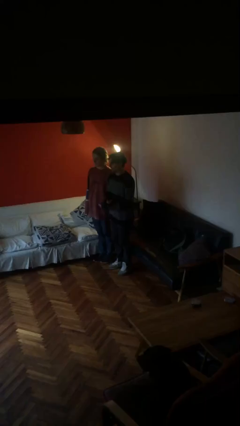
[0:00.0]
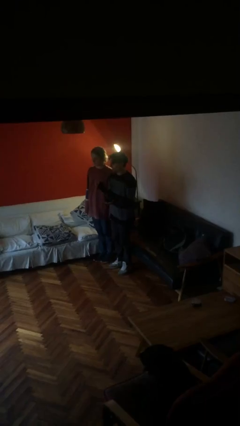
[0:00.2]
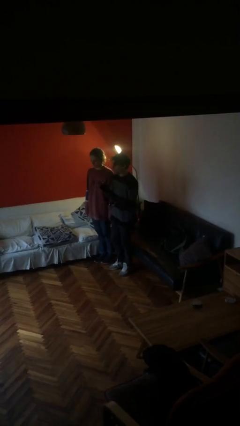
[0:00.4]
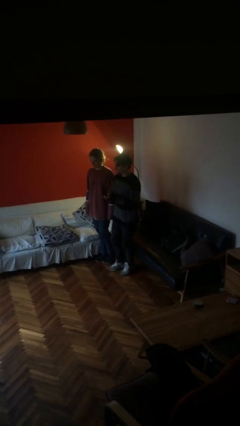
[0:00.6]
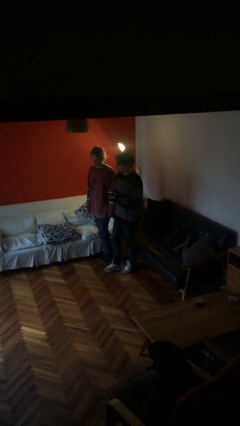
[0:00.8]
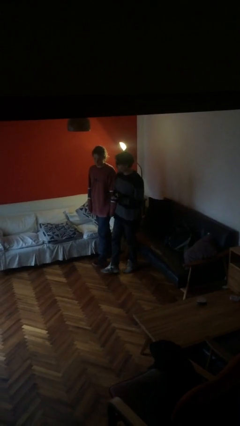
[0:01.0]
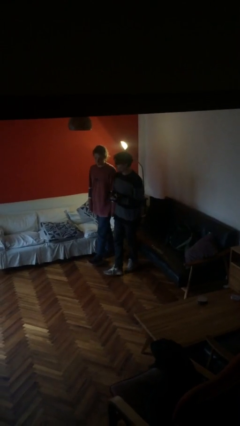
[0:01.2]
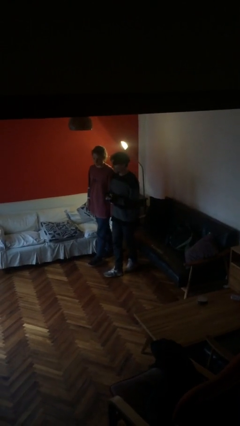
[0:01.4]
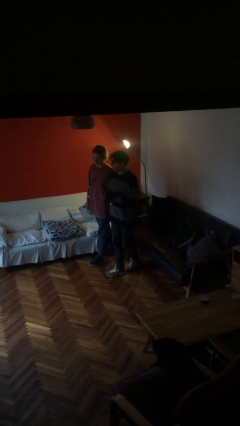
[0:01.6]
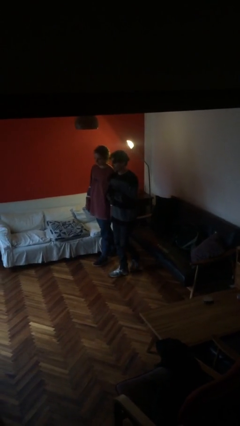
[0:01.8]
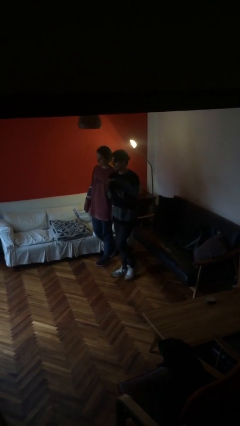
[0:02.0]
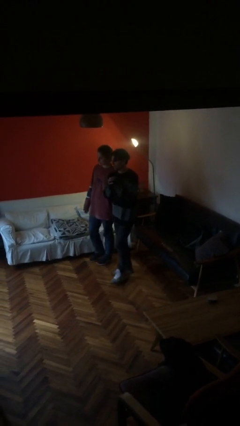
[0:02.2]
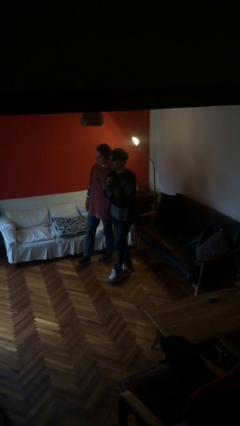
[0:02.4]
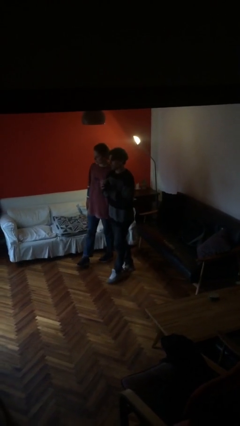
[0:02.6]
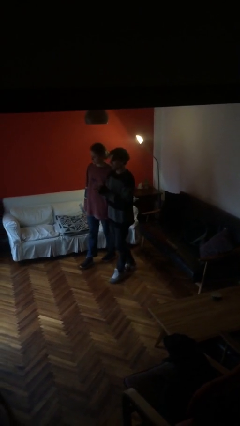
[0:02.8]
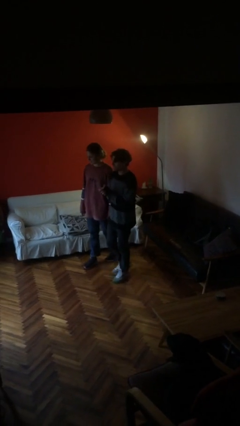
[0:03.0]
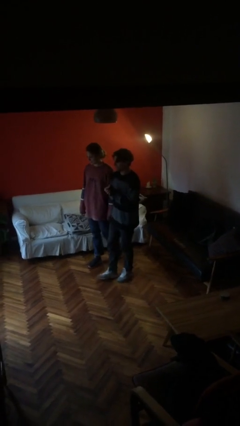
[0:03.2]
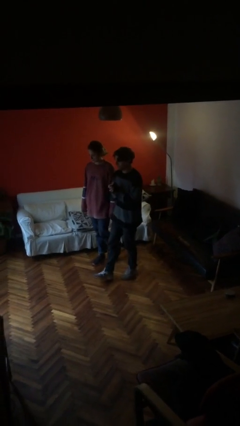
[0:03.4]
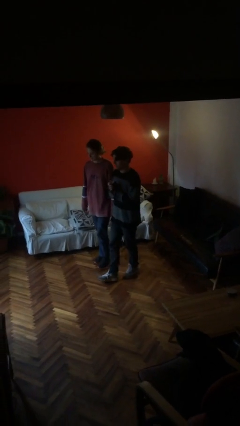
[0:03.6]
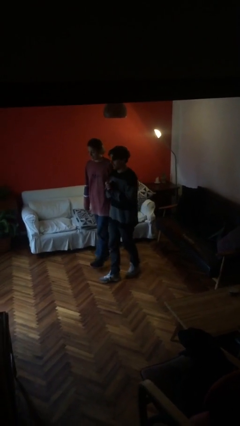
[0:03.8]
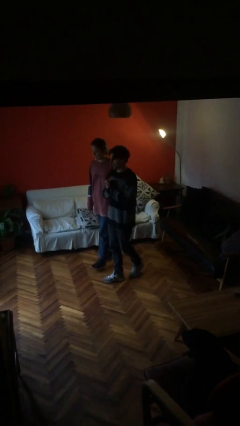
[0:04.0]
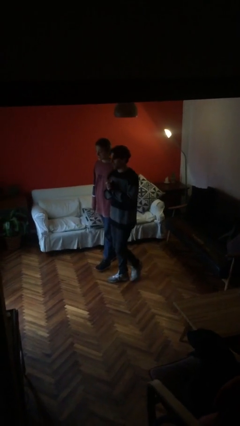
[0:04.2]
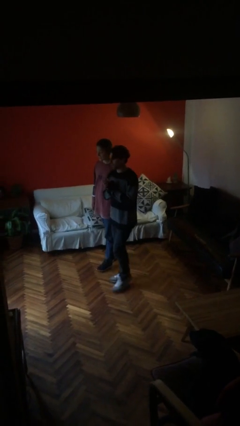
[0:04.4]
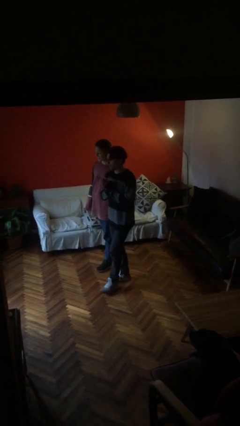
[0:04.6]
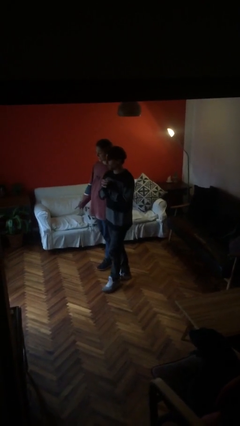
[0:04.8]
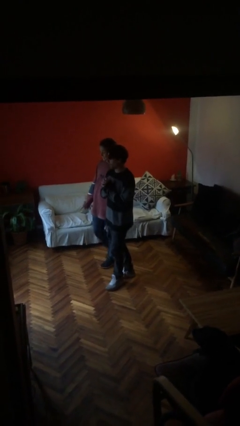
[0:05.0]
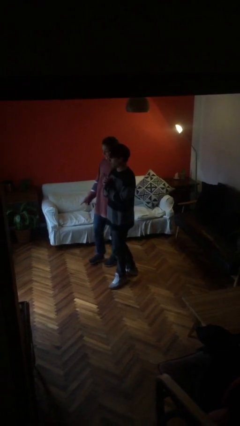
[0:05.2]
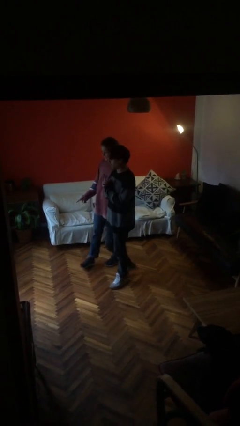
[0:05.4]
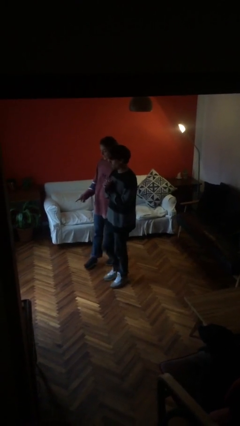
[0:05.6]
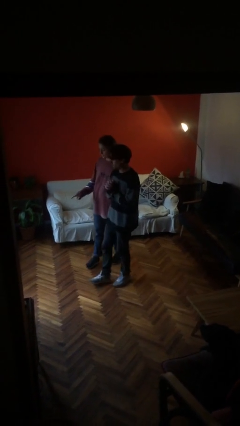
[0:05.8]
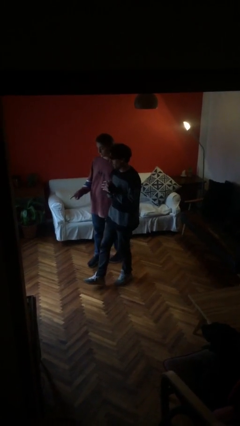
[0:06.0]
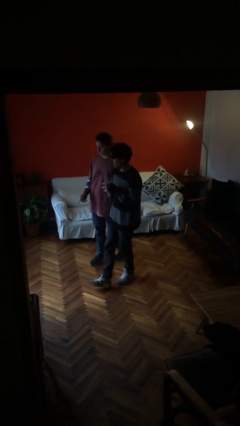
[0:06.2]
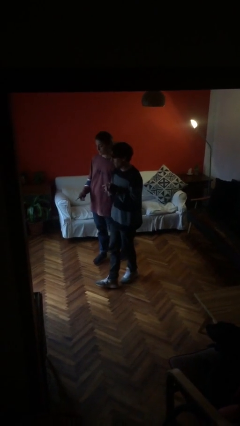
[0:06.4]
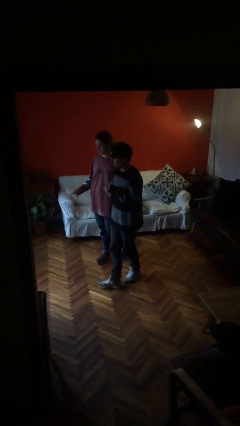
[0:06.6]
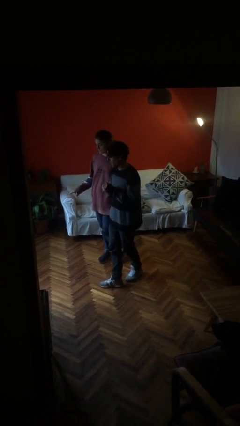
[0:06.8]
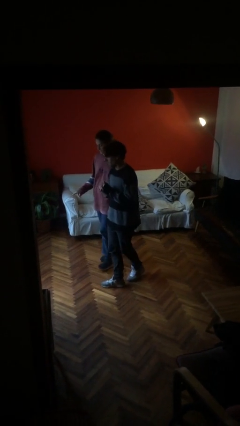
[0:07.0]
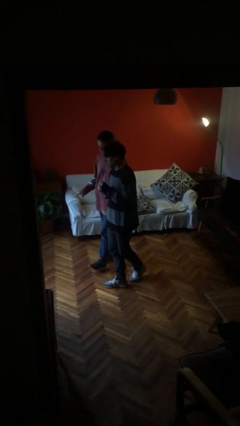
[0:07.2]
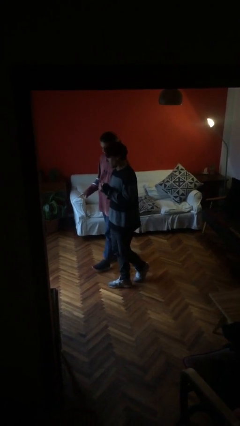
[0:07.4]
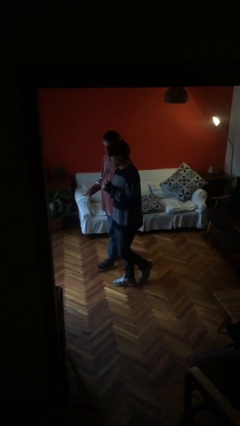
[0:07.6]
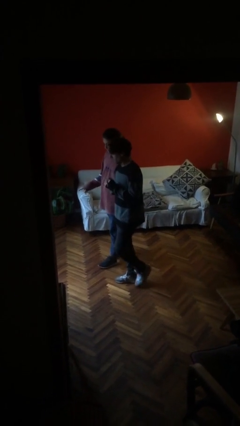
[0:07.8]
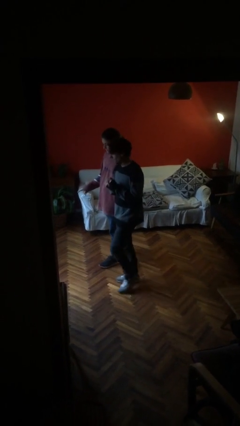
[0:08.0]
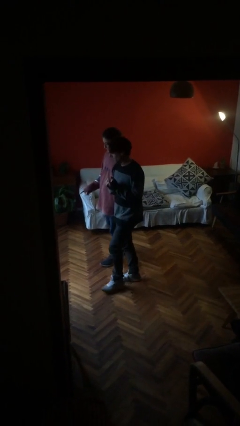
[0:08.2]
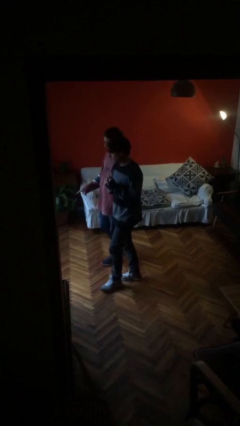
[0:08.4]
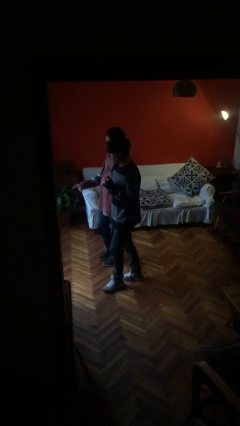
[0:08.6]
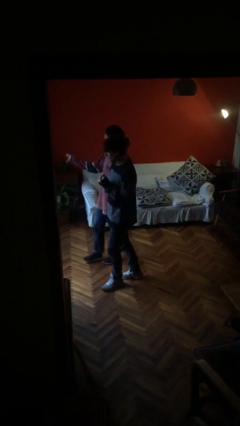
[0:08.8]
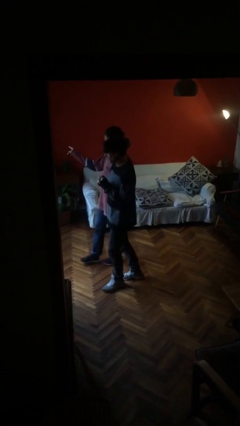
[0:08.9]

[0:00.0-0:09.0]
person talks to person

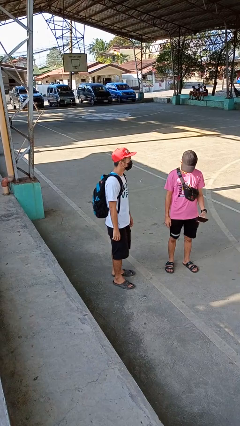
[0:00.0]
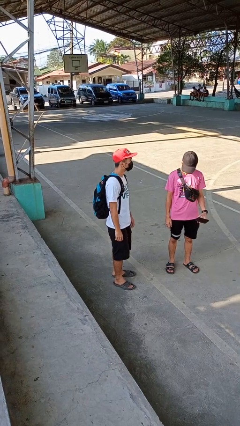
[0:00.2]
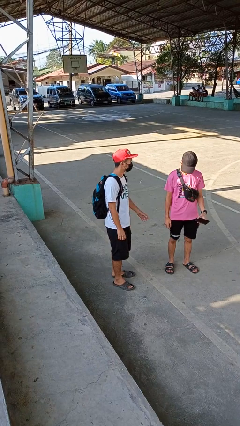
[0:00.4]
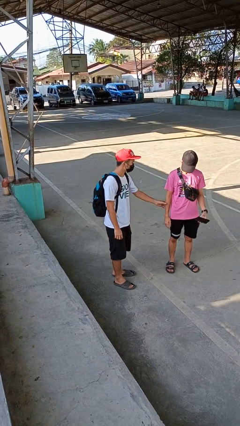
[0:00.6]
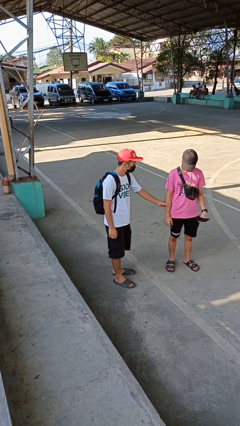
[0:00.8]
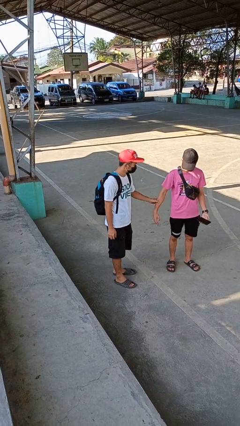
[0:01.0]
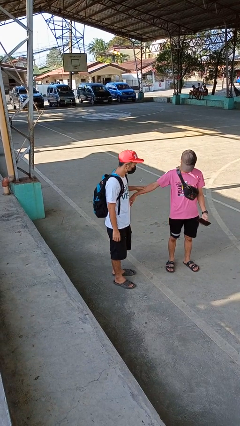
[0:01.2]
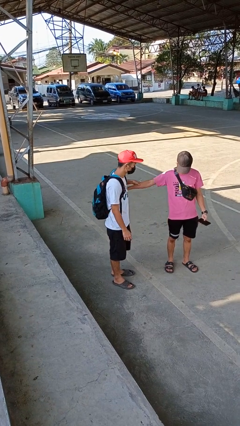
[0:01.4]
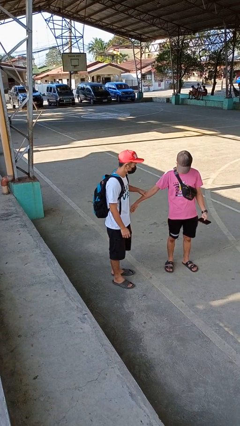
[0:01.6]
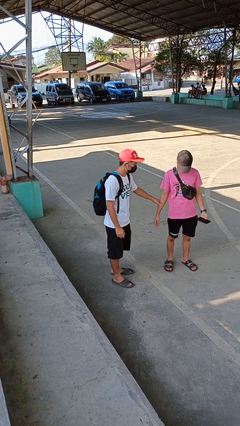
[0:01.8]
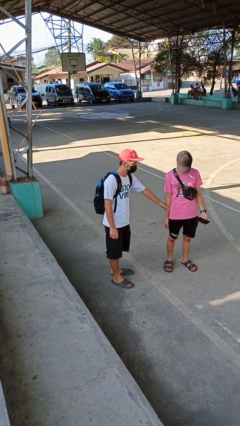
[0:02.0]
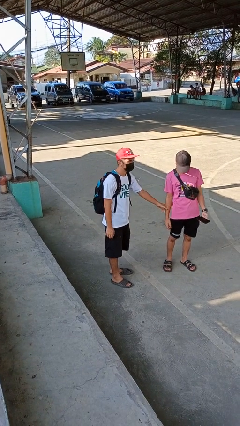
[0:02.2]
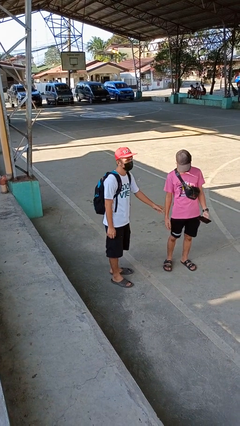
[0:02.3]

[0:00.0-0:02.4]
person grabs person by forearm

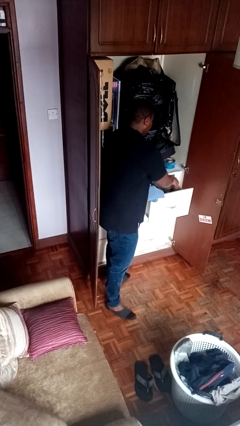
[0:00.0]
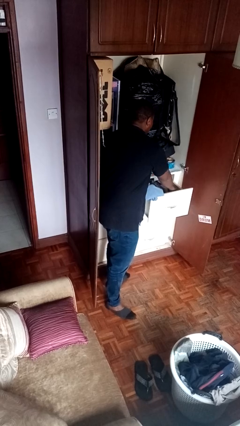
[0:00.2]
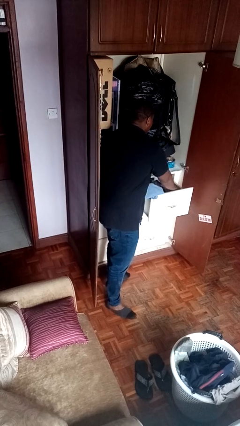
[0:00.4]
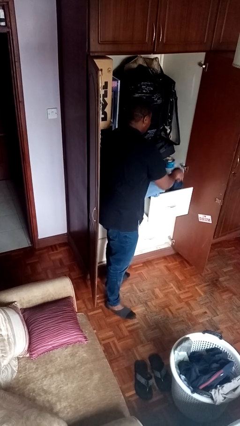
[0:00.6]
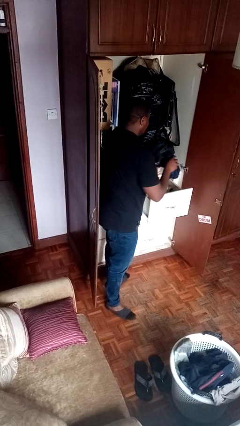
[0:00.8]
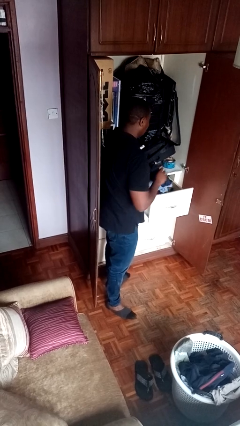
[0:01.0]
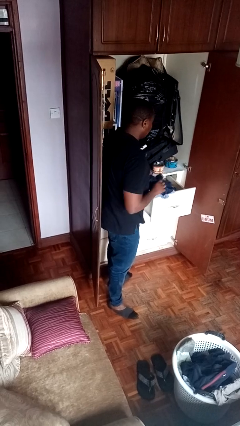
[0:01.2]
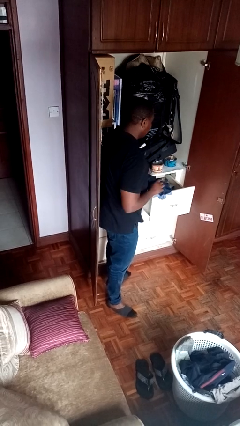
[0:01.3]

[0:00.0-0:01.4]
person takes clothes from dresser

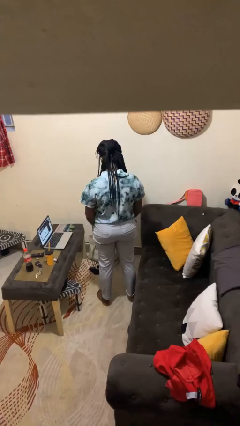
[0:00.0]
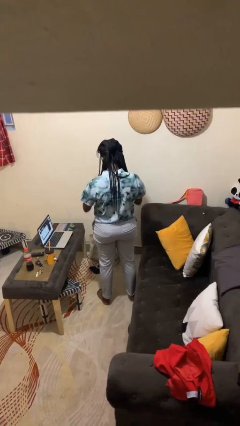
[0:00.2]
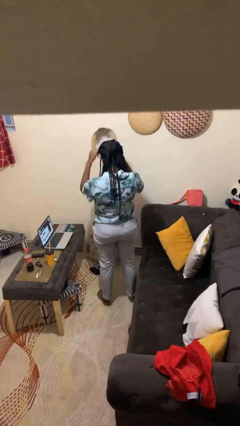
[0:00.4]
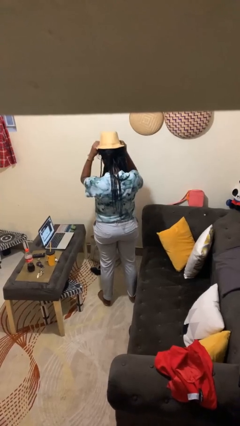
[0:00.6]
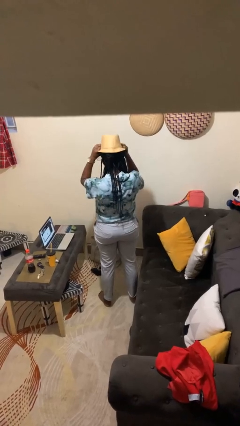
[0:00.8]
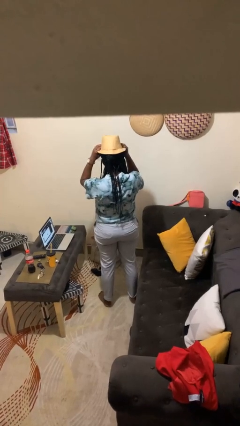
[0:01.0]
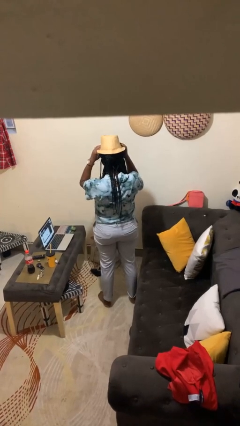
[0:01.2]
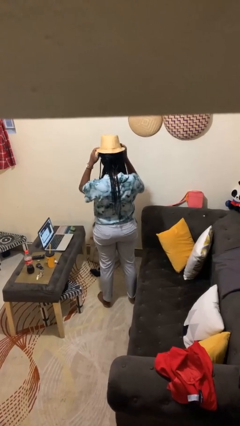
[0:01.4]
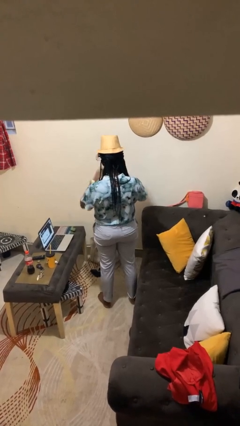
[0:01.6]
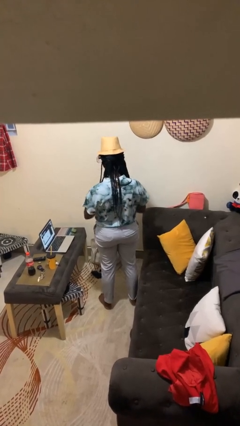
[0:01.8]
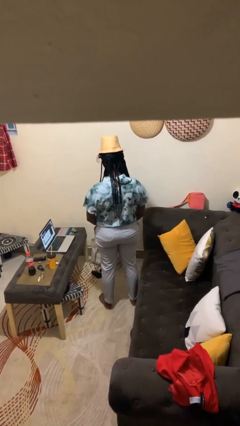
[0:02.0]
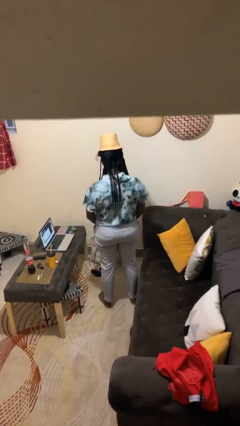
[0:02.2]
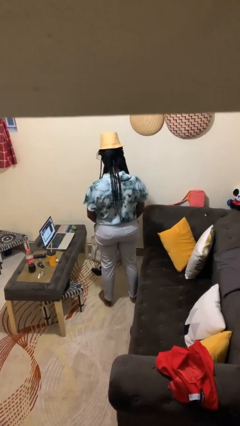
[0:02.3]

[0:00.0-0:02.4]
person puts on hat

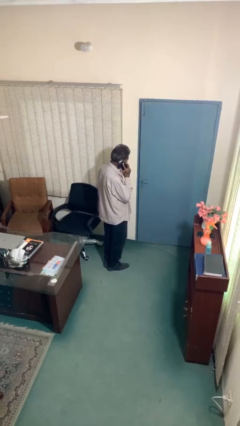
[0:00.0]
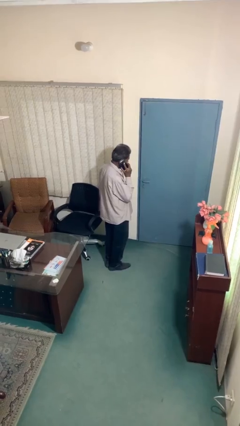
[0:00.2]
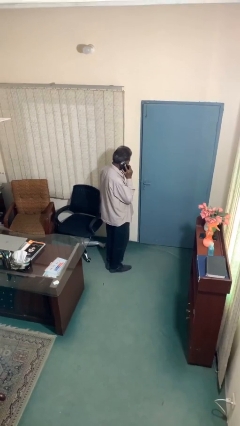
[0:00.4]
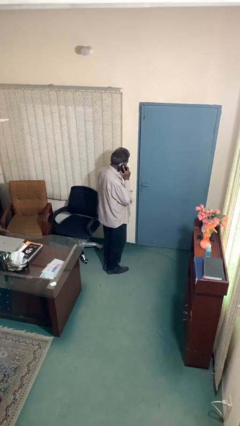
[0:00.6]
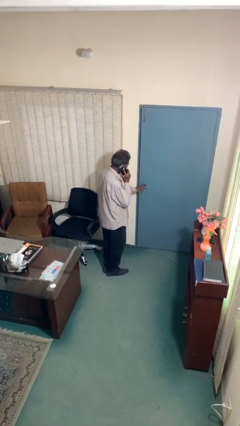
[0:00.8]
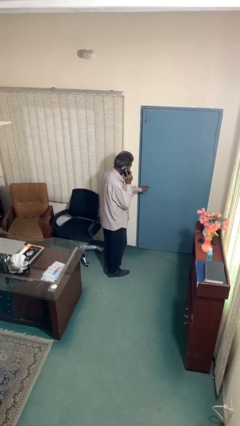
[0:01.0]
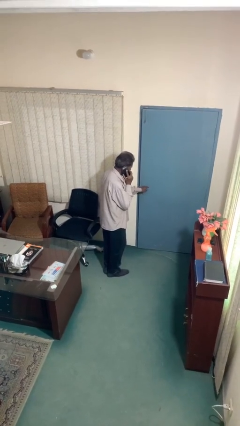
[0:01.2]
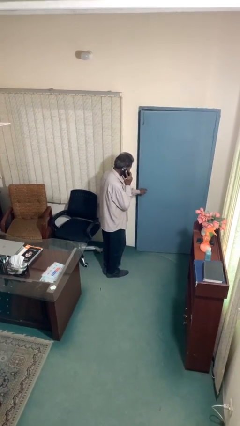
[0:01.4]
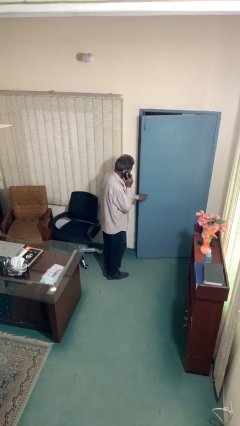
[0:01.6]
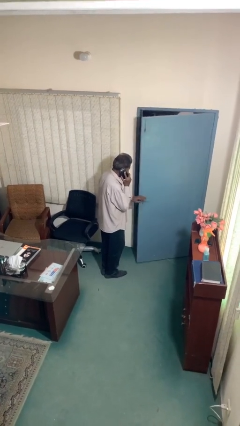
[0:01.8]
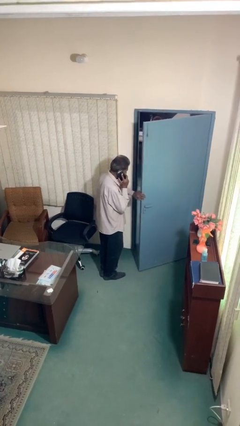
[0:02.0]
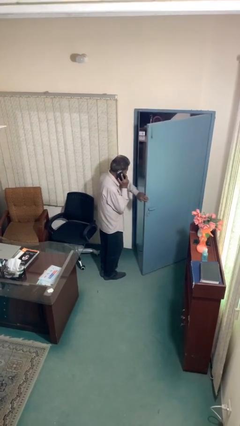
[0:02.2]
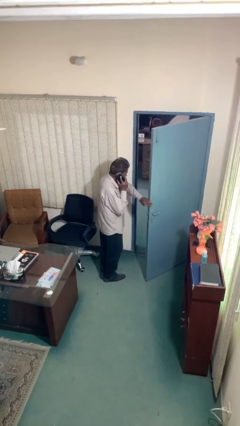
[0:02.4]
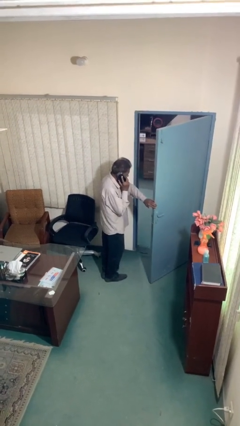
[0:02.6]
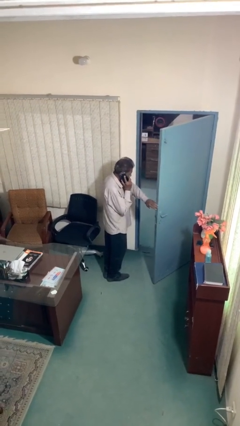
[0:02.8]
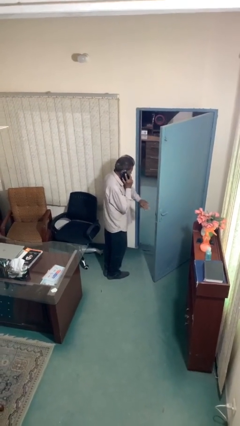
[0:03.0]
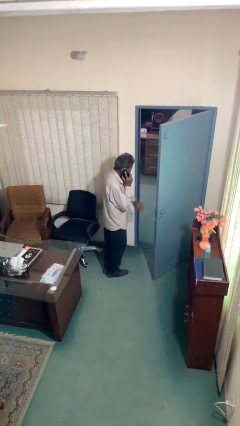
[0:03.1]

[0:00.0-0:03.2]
person opens facility door
